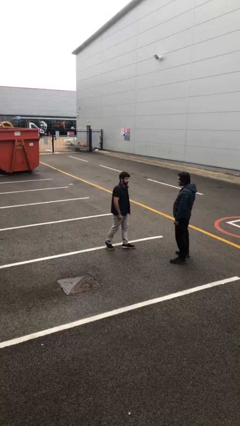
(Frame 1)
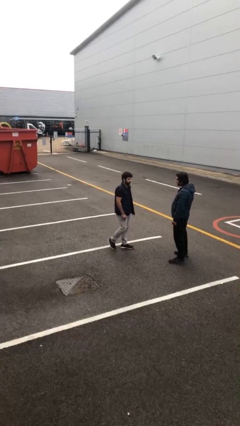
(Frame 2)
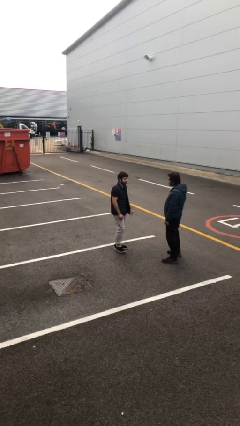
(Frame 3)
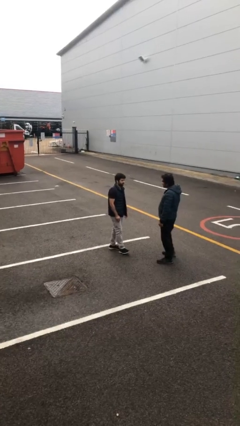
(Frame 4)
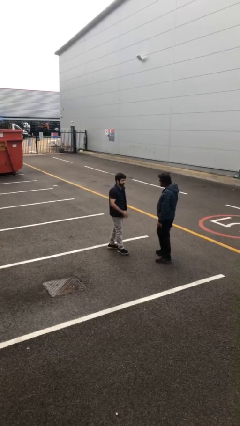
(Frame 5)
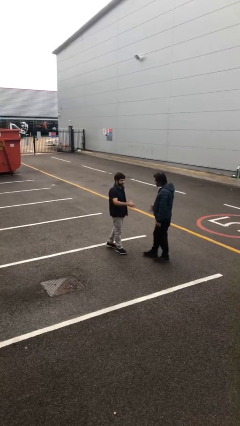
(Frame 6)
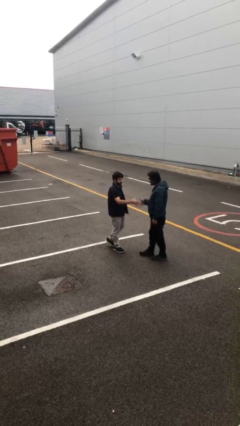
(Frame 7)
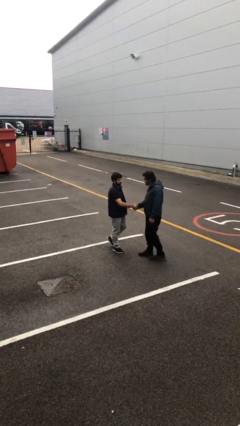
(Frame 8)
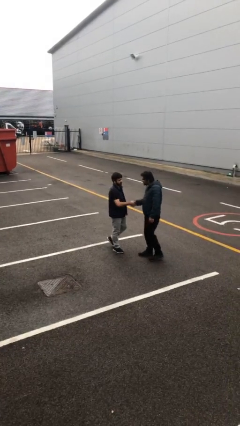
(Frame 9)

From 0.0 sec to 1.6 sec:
person shakes hand

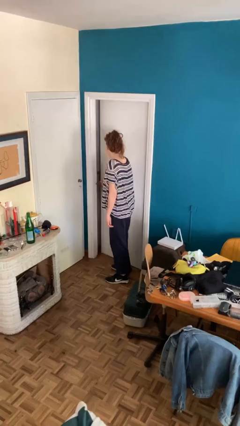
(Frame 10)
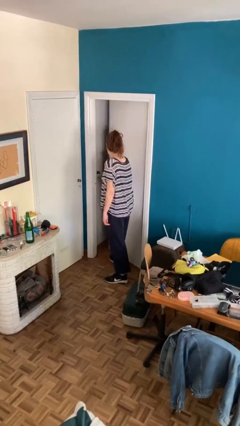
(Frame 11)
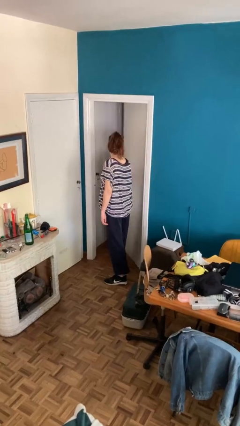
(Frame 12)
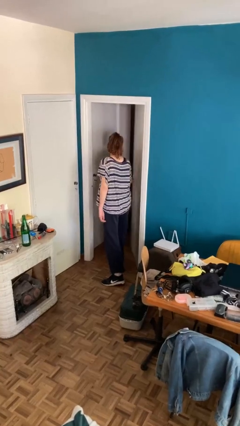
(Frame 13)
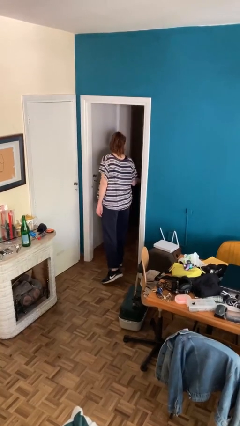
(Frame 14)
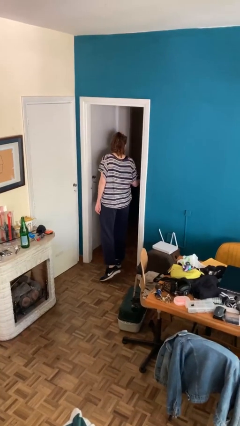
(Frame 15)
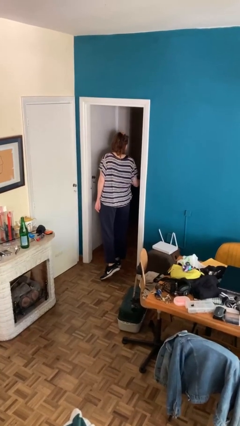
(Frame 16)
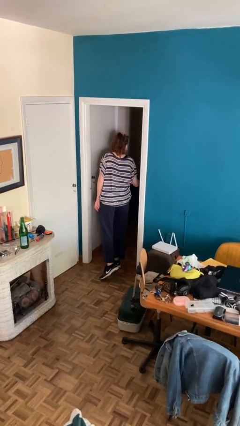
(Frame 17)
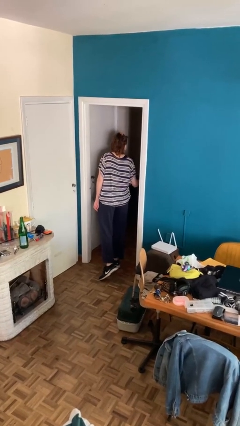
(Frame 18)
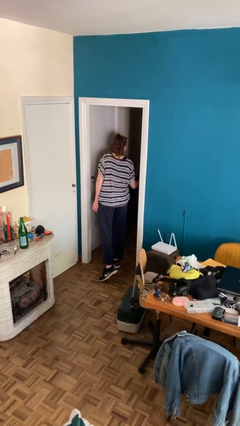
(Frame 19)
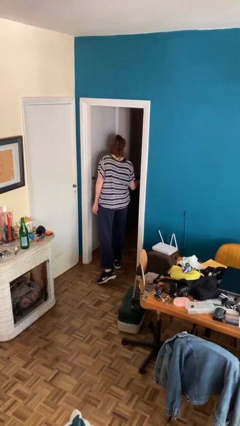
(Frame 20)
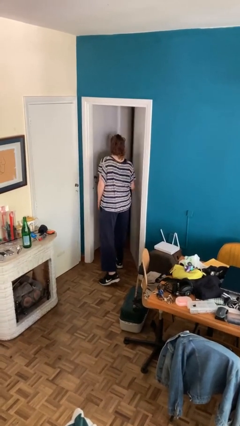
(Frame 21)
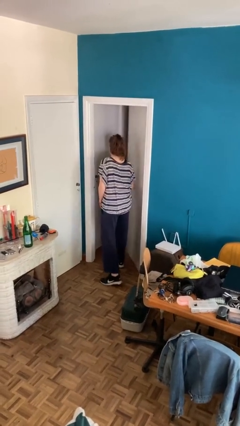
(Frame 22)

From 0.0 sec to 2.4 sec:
person opens facility door

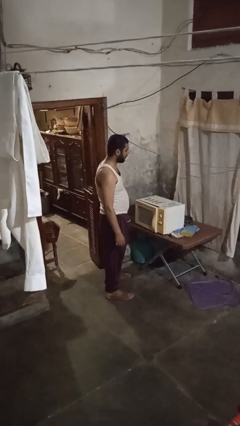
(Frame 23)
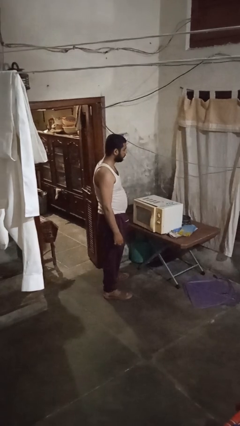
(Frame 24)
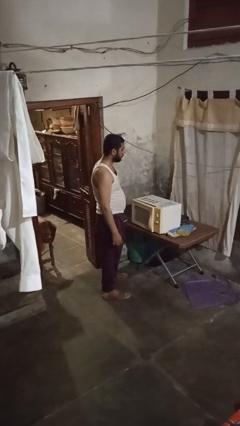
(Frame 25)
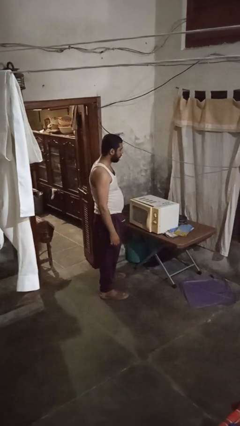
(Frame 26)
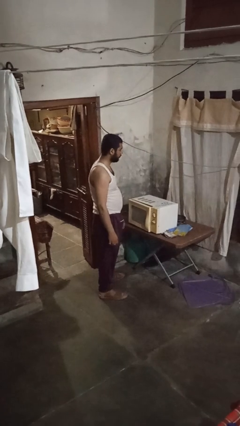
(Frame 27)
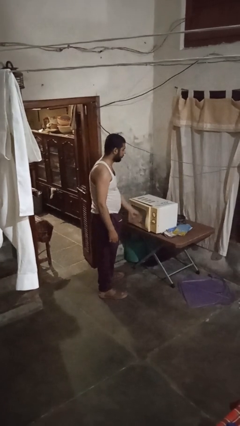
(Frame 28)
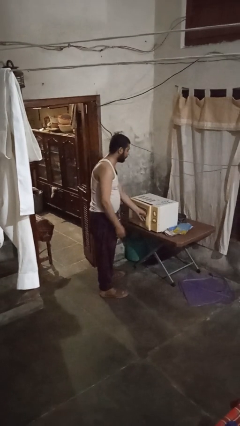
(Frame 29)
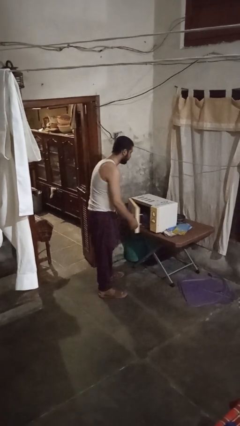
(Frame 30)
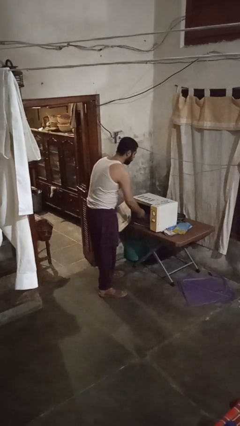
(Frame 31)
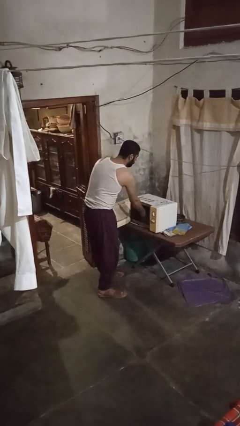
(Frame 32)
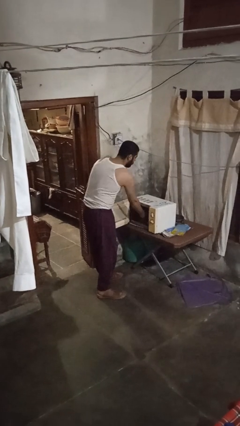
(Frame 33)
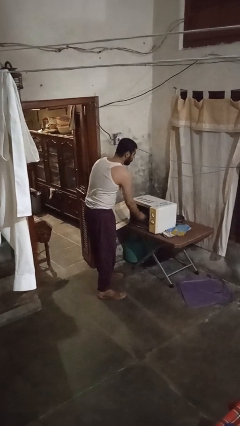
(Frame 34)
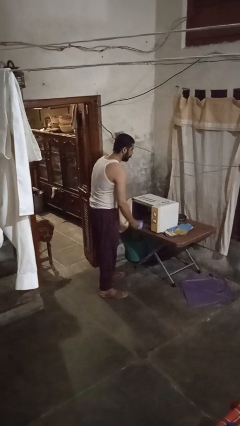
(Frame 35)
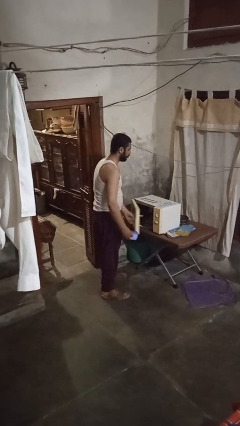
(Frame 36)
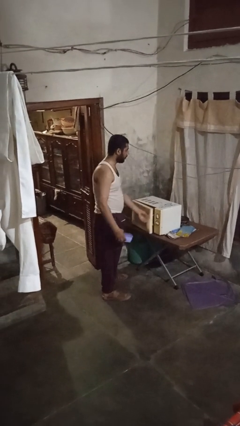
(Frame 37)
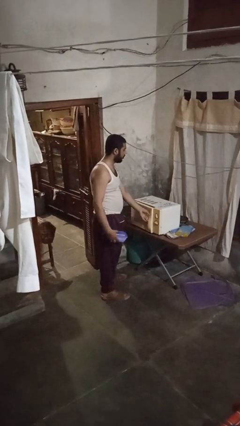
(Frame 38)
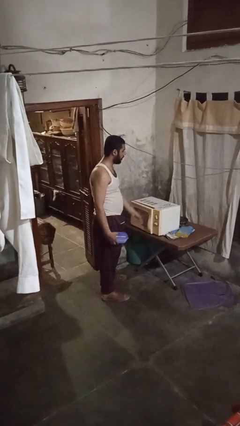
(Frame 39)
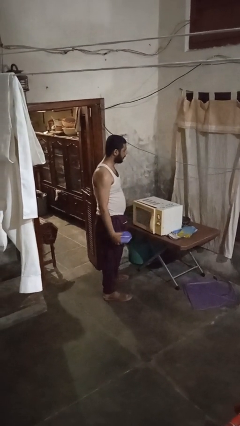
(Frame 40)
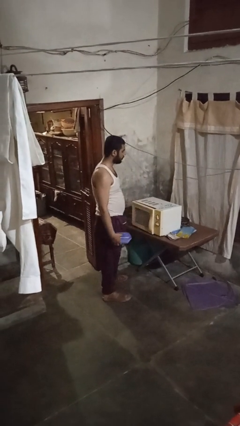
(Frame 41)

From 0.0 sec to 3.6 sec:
person takes object from microwave

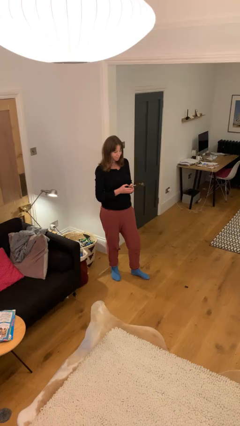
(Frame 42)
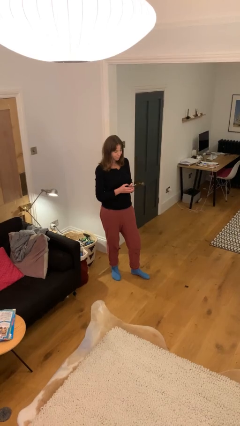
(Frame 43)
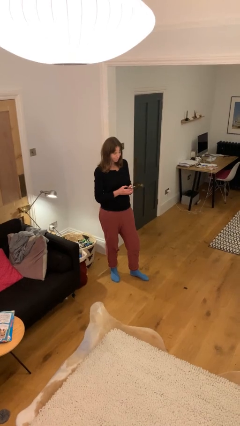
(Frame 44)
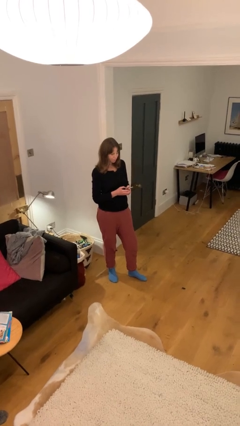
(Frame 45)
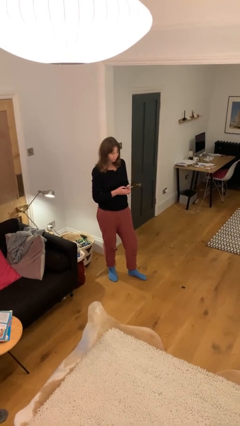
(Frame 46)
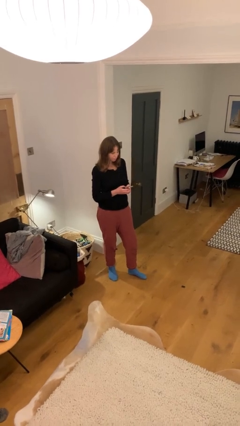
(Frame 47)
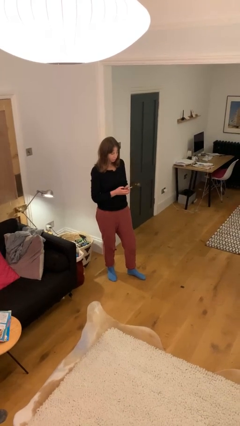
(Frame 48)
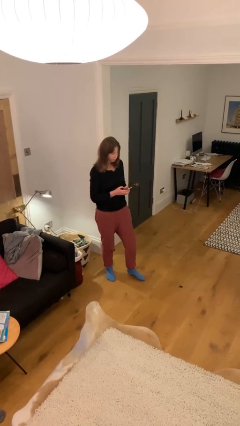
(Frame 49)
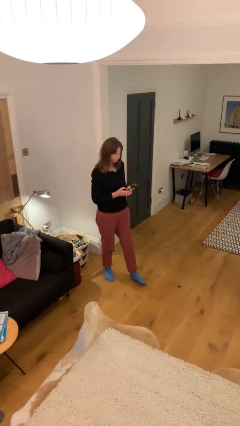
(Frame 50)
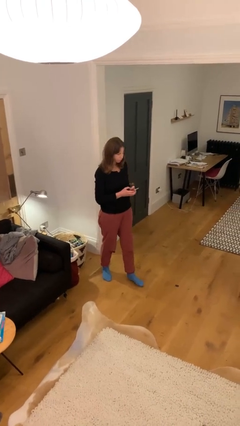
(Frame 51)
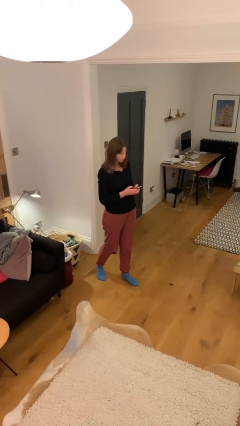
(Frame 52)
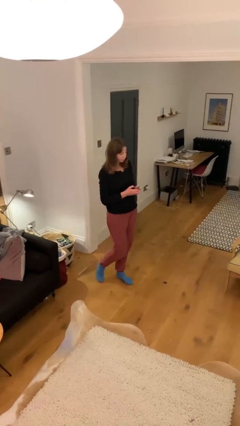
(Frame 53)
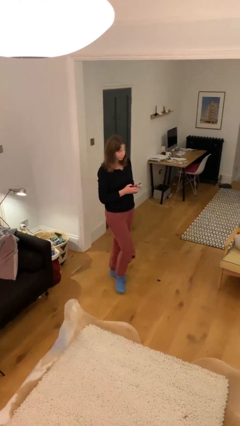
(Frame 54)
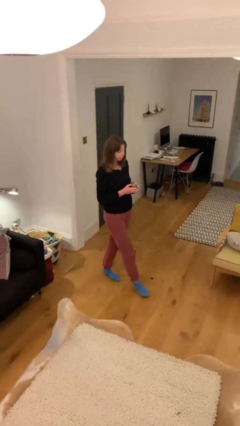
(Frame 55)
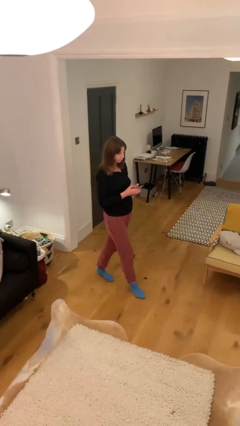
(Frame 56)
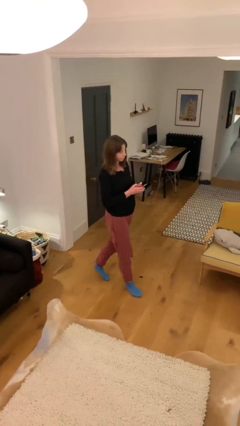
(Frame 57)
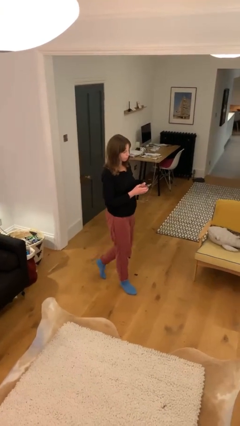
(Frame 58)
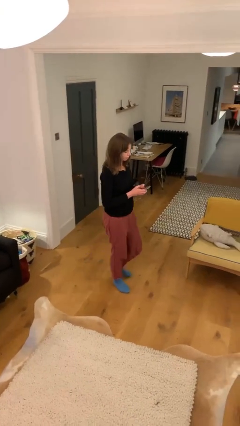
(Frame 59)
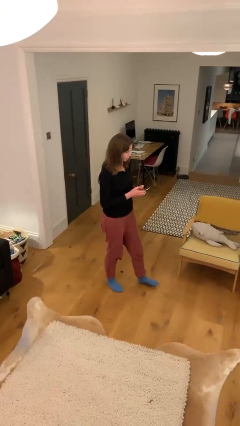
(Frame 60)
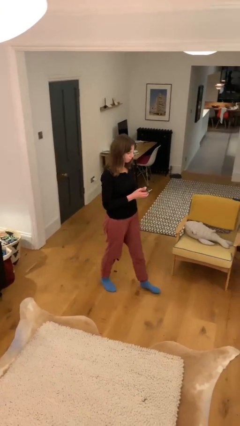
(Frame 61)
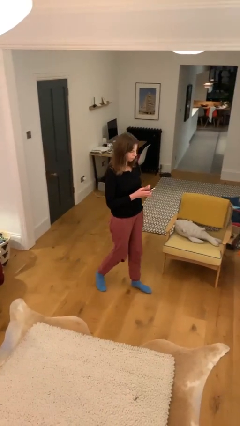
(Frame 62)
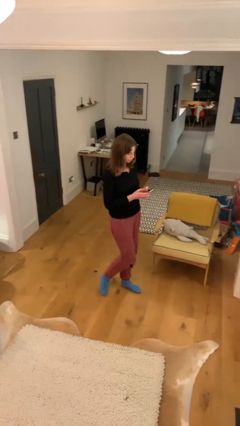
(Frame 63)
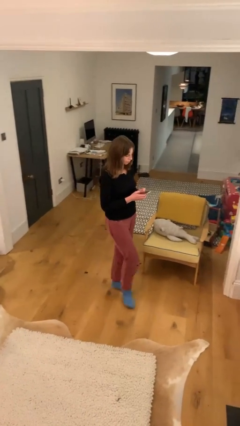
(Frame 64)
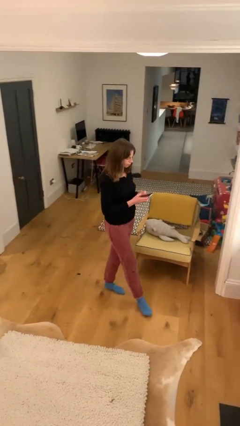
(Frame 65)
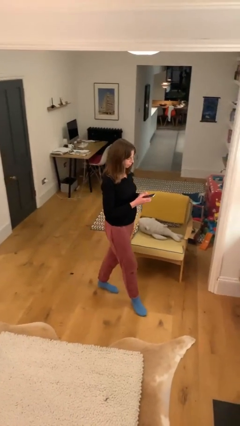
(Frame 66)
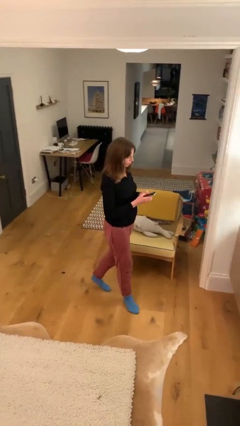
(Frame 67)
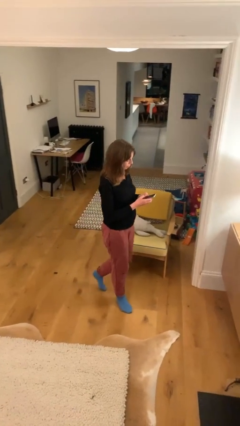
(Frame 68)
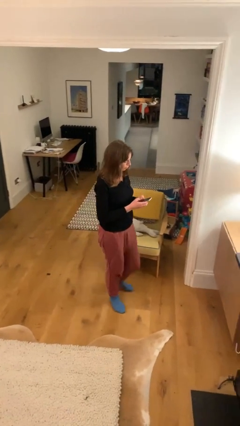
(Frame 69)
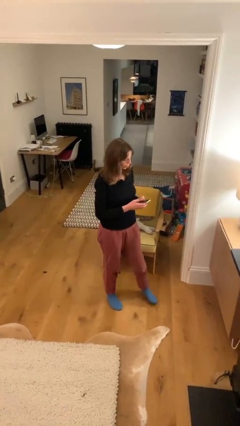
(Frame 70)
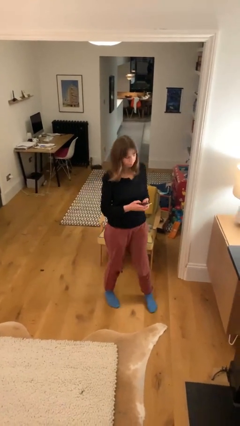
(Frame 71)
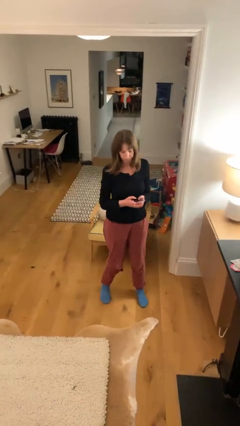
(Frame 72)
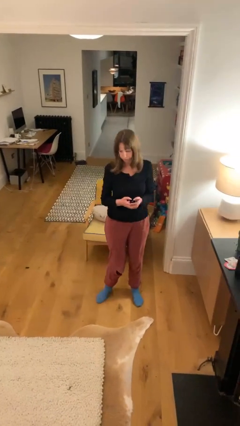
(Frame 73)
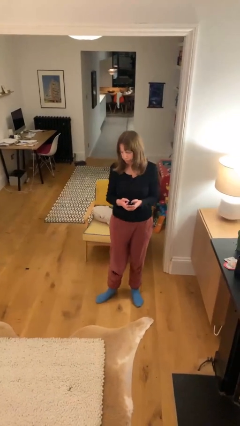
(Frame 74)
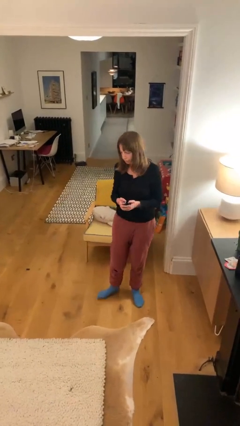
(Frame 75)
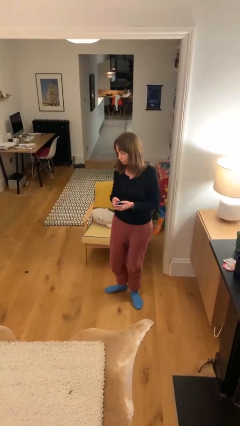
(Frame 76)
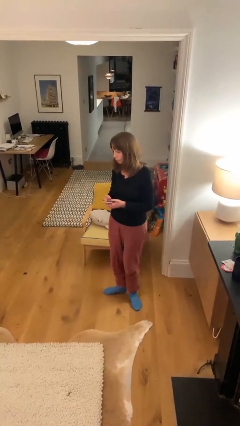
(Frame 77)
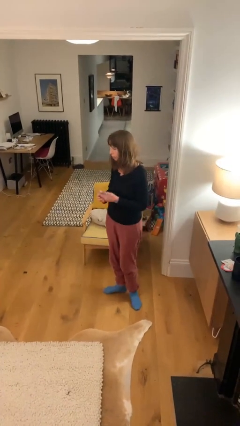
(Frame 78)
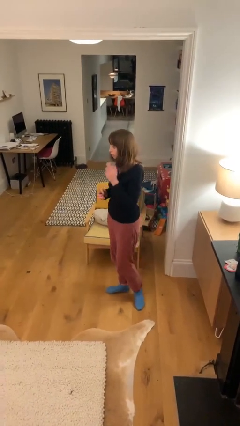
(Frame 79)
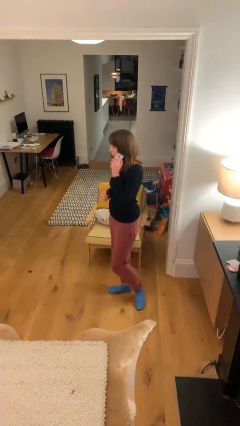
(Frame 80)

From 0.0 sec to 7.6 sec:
person texts on phone

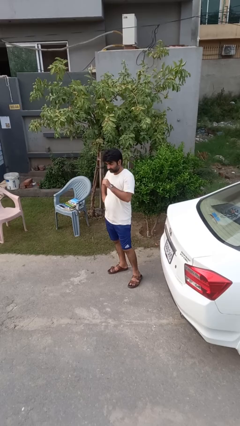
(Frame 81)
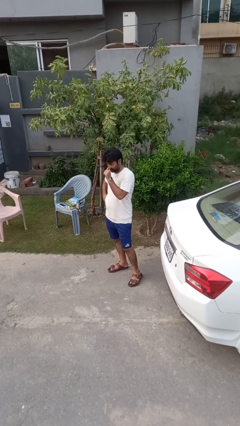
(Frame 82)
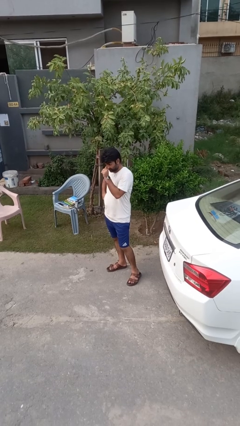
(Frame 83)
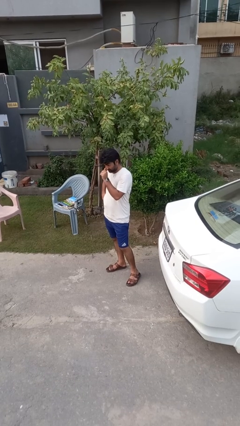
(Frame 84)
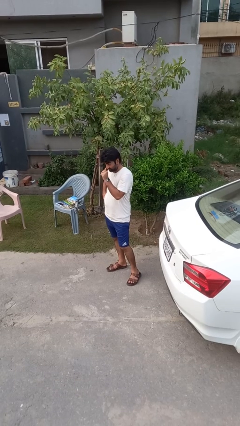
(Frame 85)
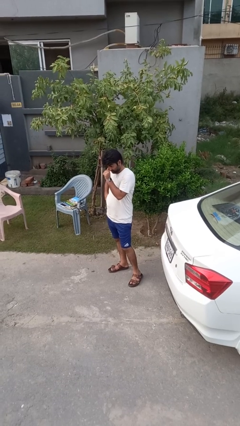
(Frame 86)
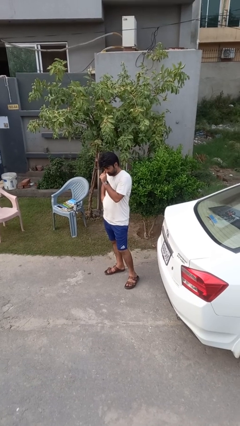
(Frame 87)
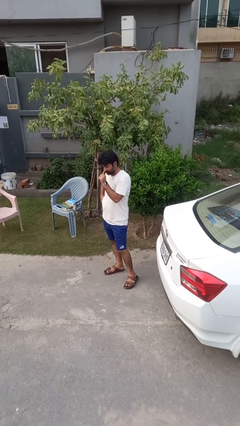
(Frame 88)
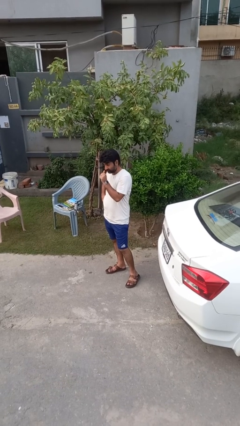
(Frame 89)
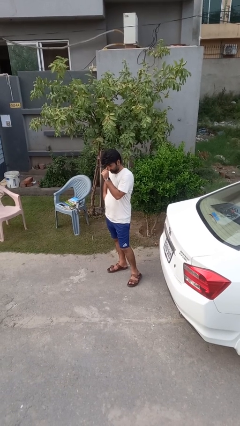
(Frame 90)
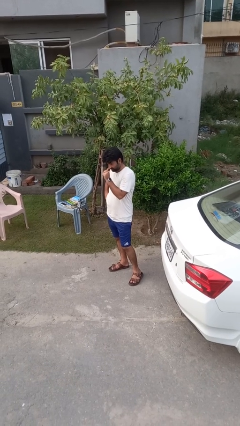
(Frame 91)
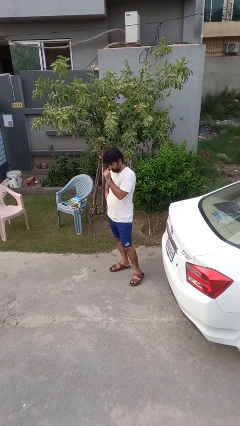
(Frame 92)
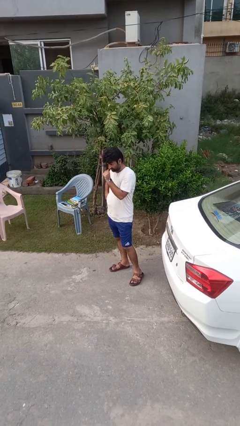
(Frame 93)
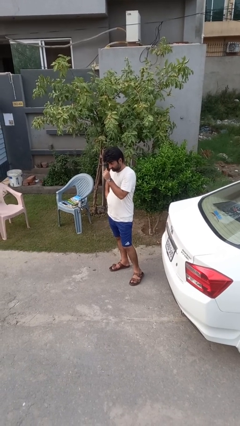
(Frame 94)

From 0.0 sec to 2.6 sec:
person scratches face
